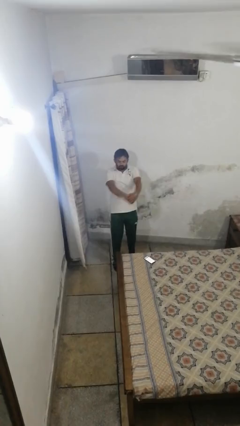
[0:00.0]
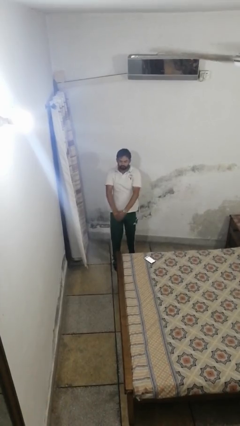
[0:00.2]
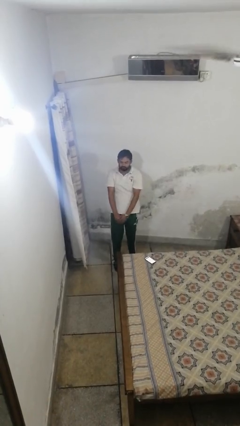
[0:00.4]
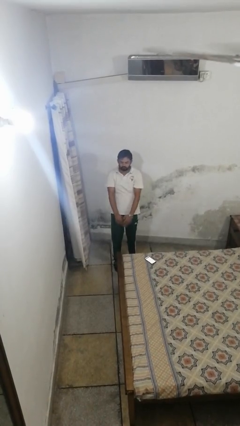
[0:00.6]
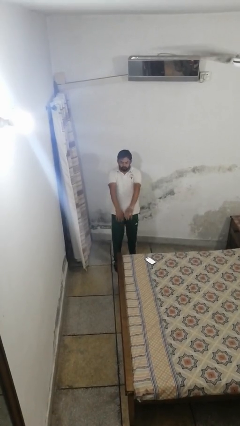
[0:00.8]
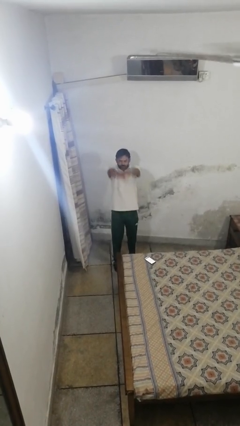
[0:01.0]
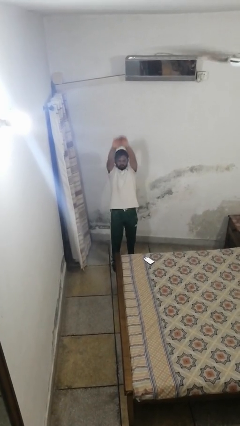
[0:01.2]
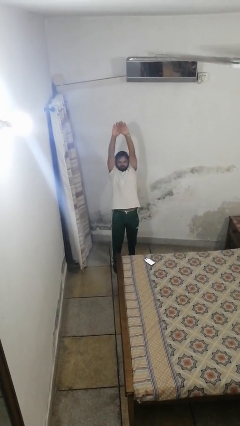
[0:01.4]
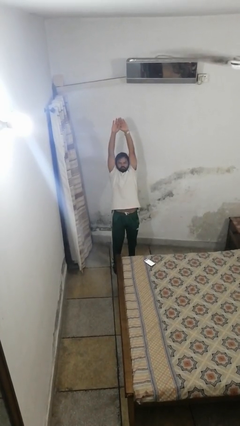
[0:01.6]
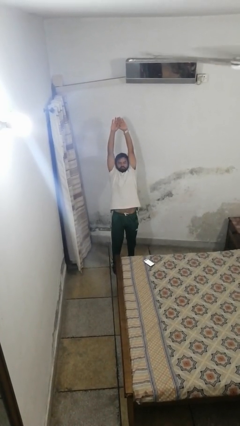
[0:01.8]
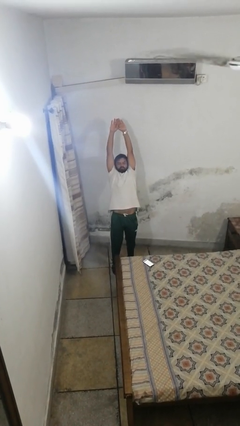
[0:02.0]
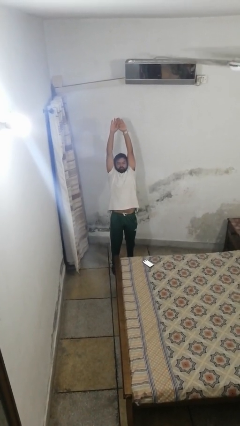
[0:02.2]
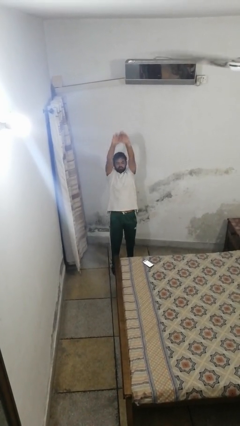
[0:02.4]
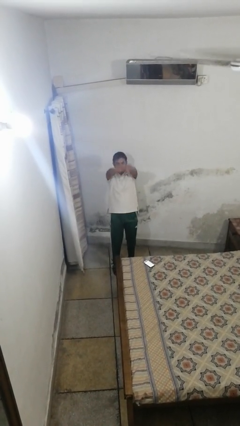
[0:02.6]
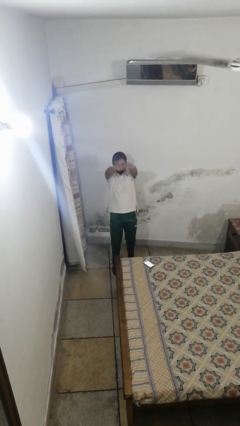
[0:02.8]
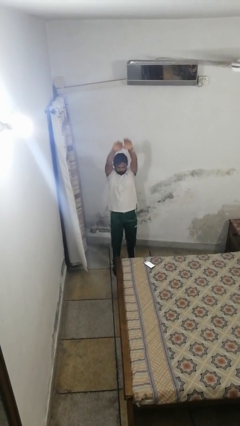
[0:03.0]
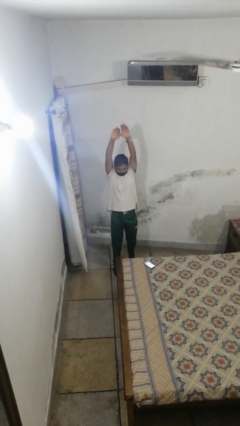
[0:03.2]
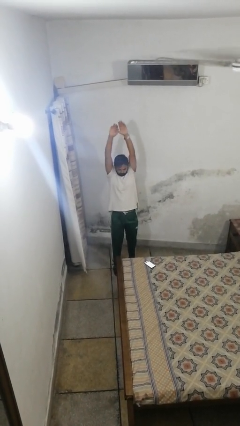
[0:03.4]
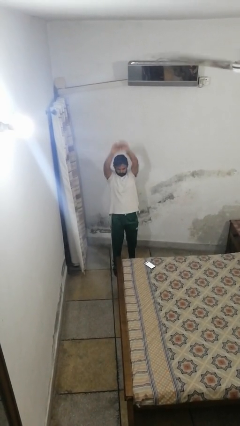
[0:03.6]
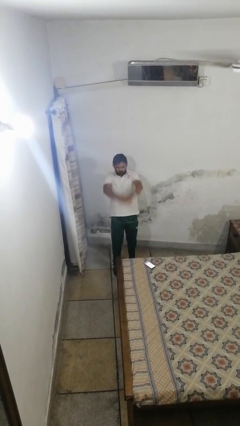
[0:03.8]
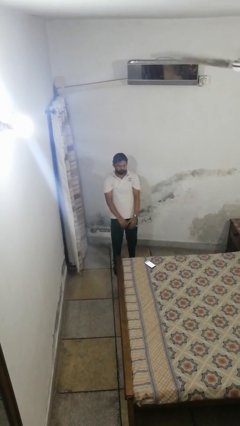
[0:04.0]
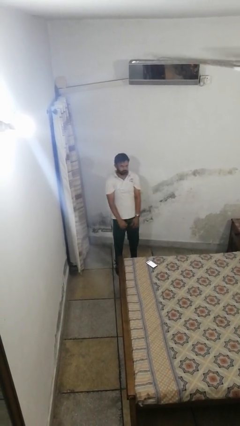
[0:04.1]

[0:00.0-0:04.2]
person stretches arms over head

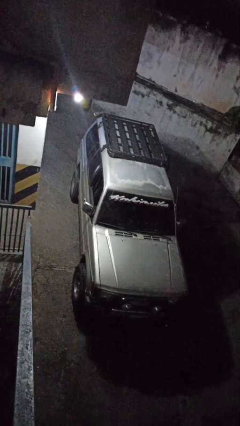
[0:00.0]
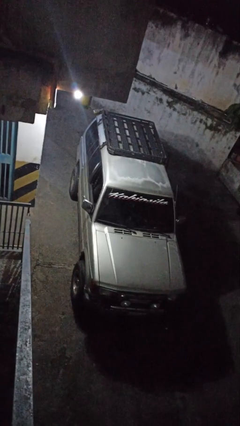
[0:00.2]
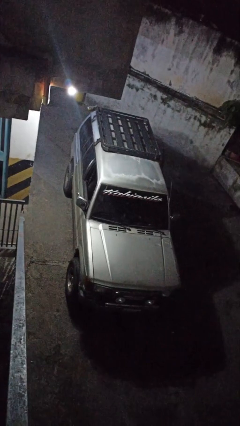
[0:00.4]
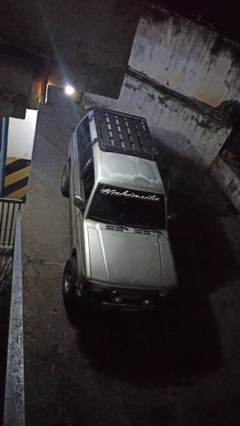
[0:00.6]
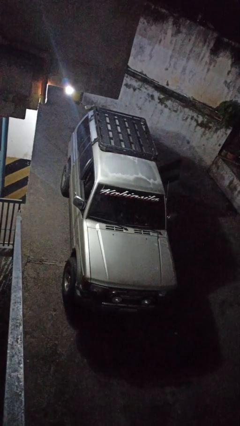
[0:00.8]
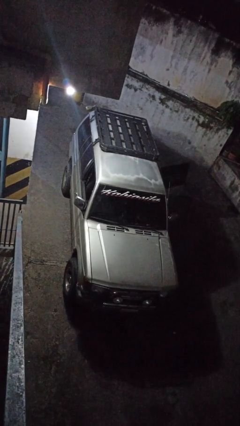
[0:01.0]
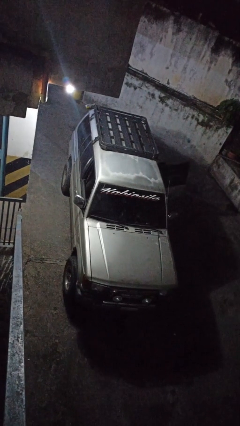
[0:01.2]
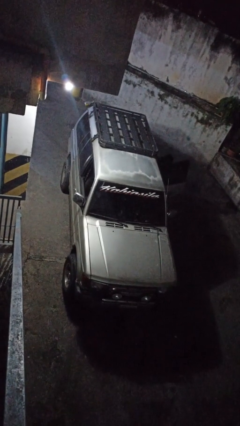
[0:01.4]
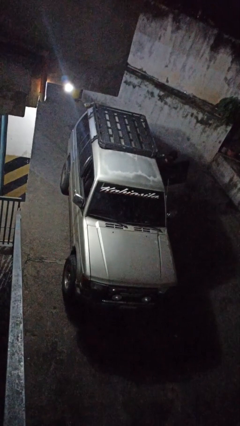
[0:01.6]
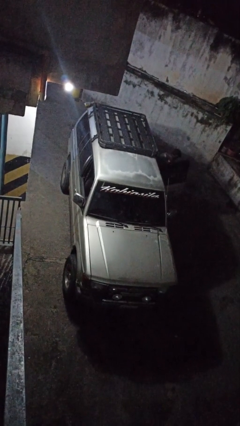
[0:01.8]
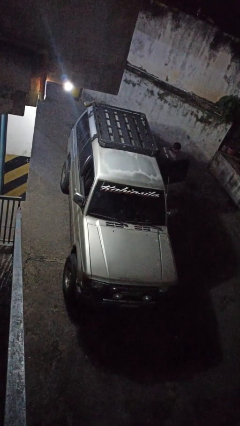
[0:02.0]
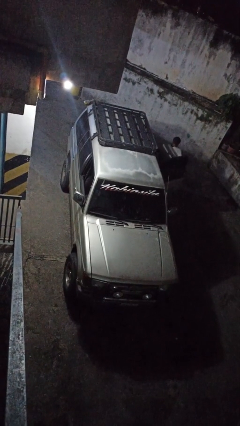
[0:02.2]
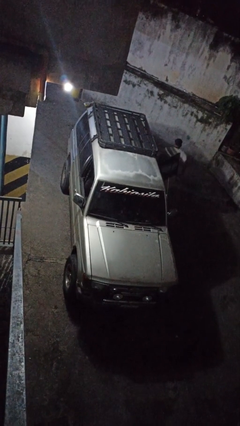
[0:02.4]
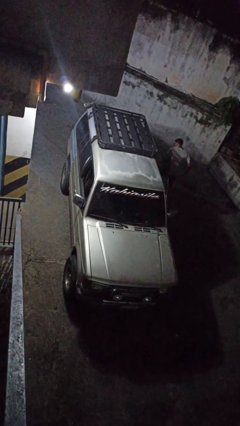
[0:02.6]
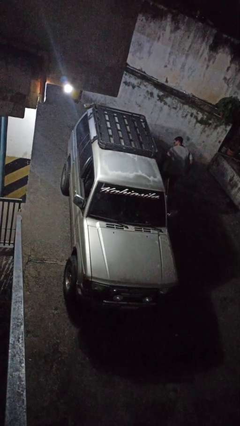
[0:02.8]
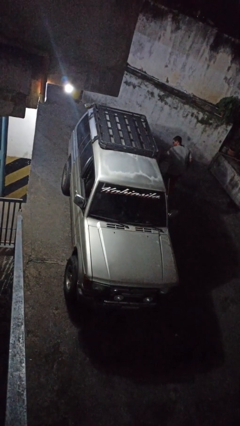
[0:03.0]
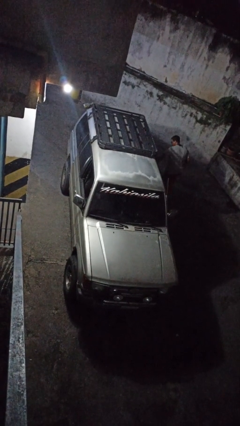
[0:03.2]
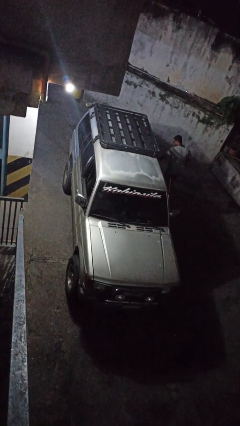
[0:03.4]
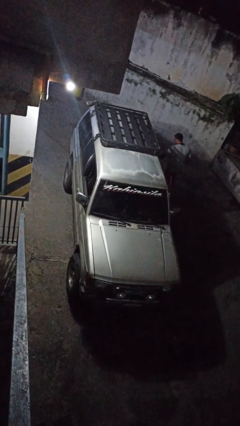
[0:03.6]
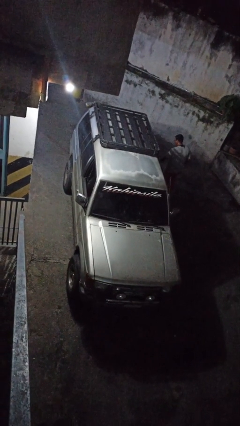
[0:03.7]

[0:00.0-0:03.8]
car drops off person

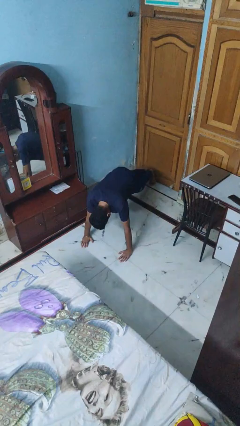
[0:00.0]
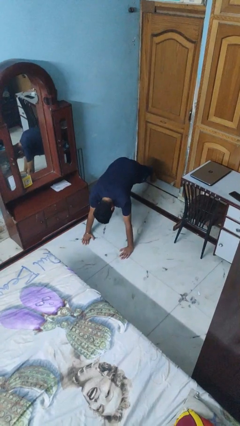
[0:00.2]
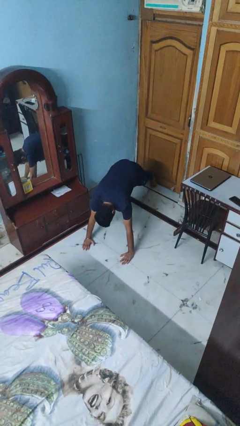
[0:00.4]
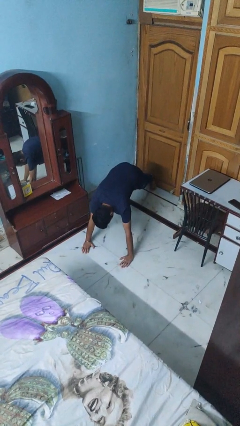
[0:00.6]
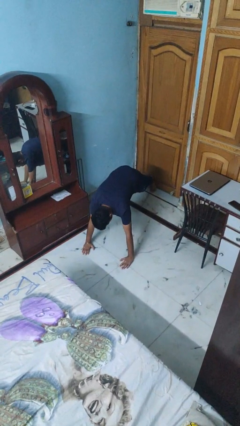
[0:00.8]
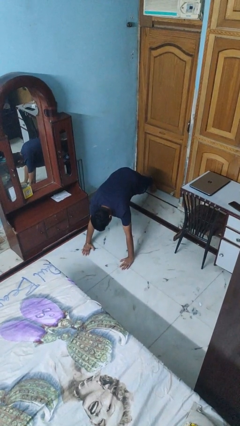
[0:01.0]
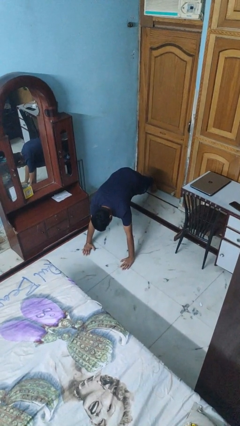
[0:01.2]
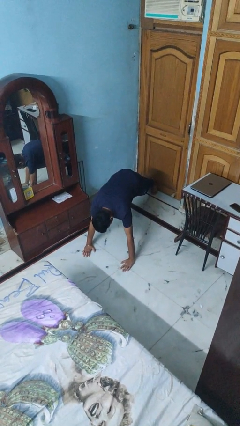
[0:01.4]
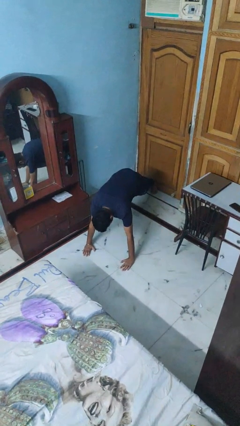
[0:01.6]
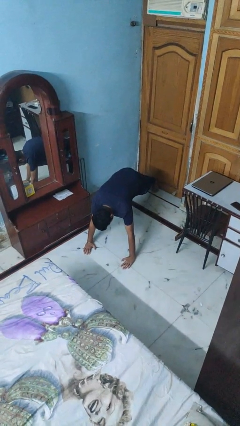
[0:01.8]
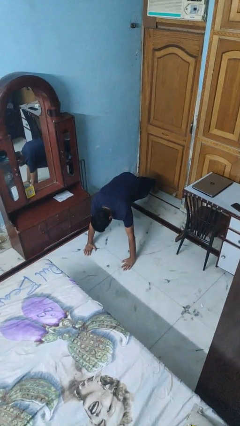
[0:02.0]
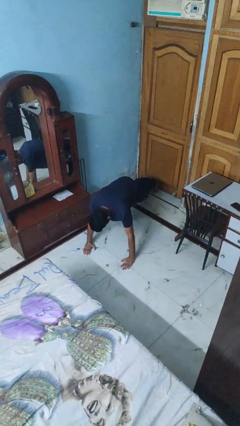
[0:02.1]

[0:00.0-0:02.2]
person exercises with pushup

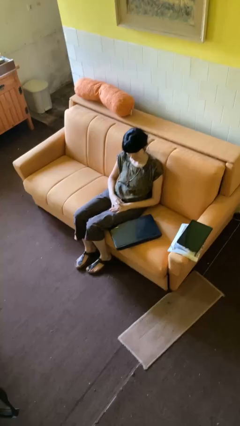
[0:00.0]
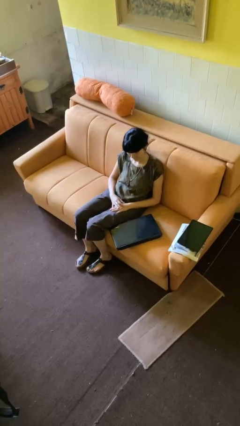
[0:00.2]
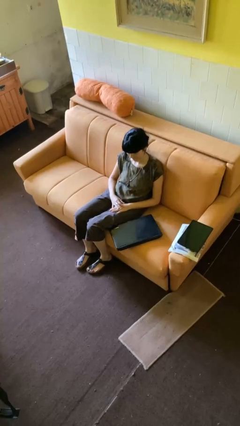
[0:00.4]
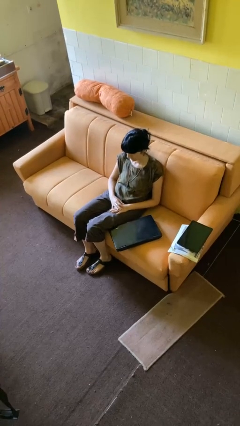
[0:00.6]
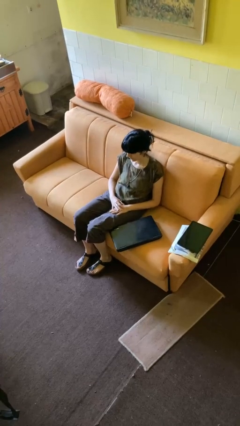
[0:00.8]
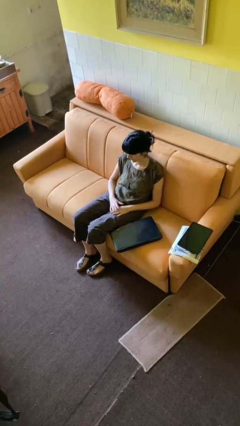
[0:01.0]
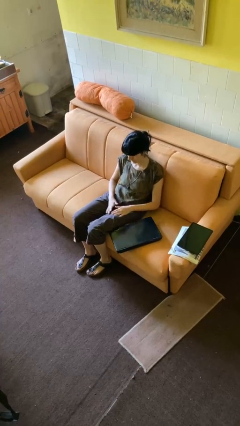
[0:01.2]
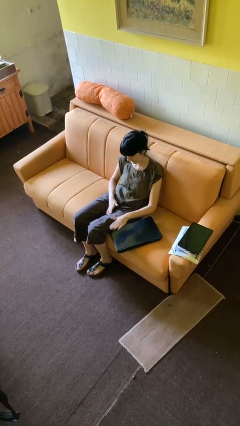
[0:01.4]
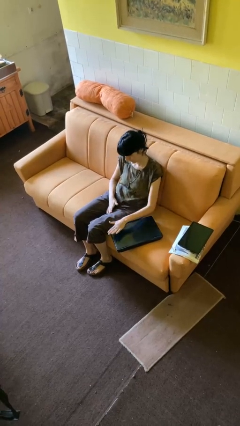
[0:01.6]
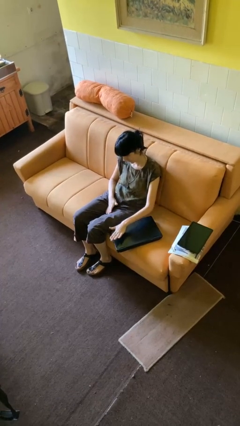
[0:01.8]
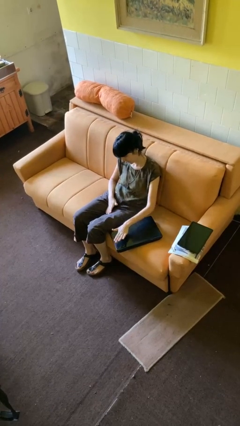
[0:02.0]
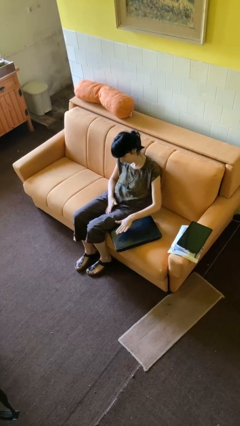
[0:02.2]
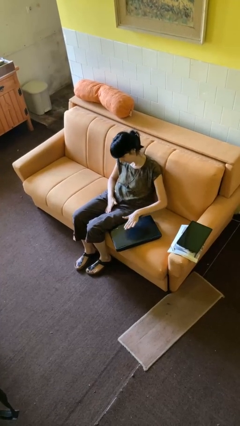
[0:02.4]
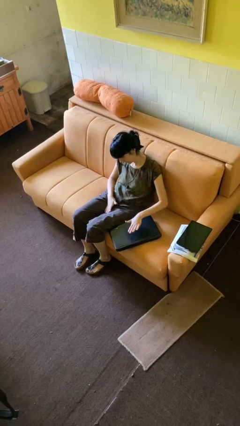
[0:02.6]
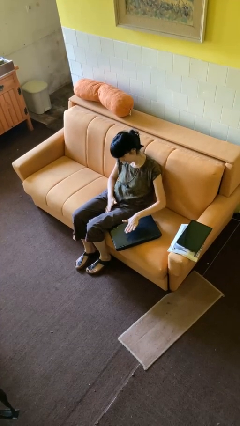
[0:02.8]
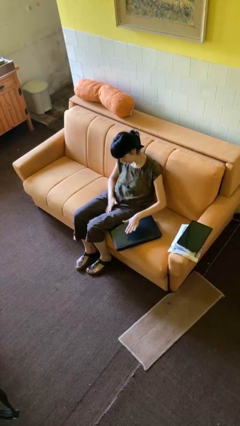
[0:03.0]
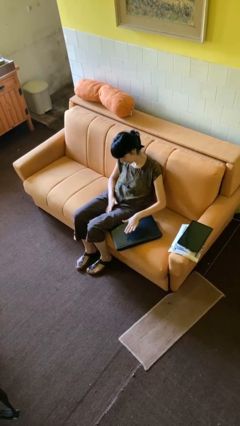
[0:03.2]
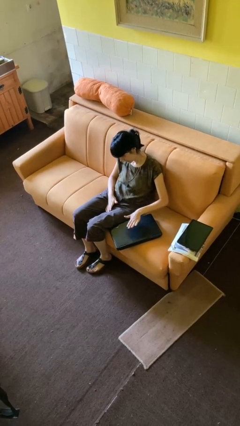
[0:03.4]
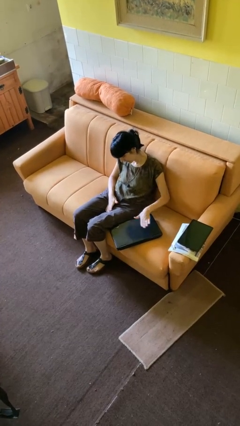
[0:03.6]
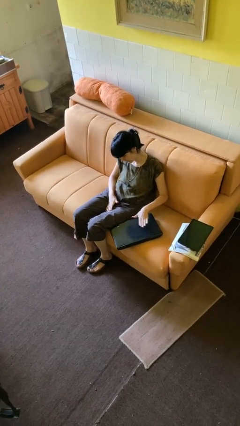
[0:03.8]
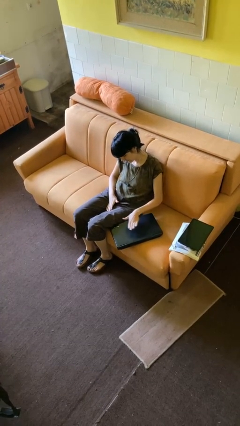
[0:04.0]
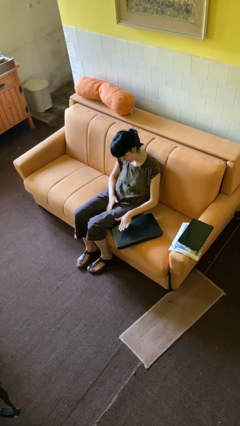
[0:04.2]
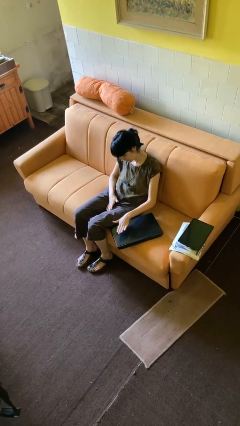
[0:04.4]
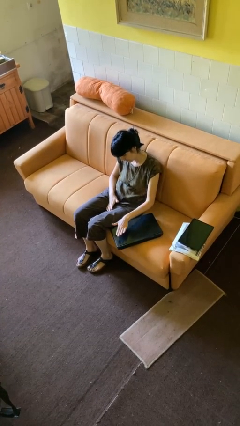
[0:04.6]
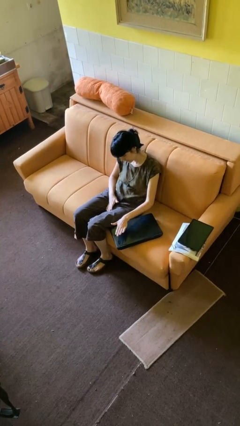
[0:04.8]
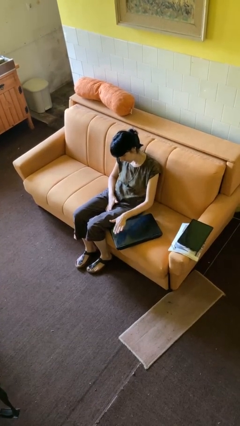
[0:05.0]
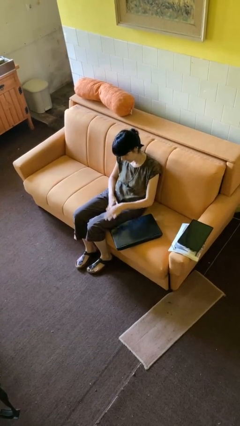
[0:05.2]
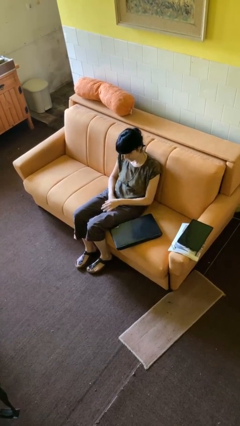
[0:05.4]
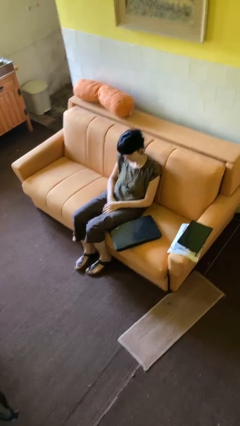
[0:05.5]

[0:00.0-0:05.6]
person waves hand over object

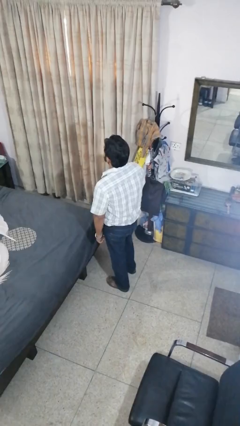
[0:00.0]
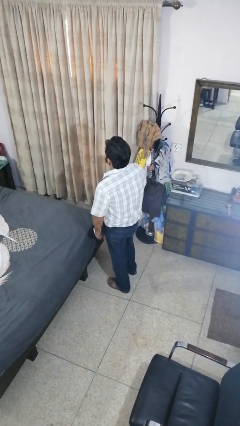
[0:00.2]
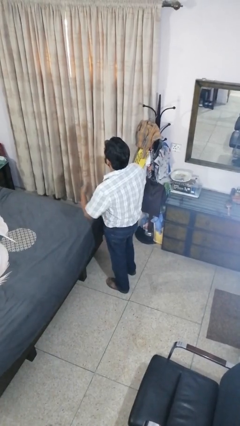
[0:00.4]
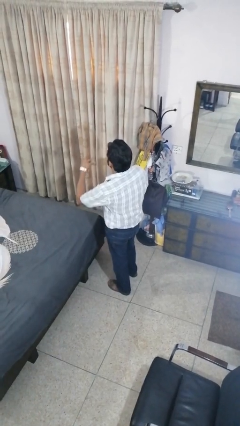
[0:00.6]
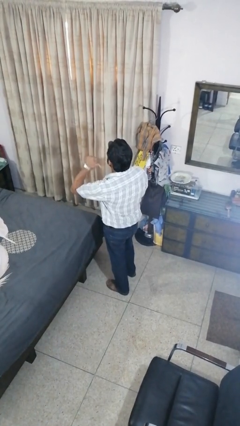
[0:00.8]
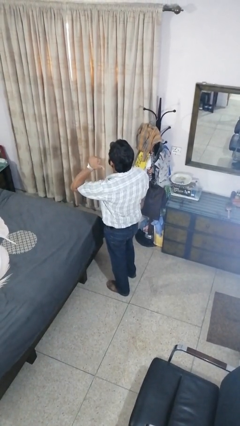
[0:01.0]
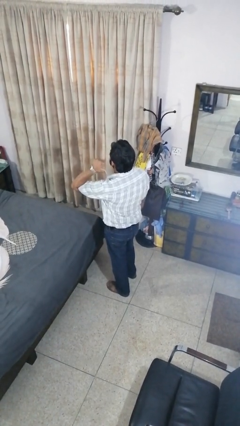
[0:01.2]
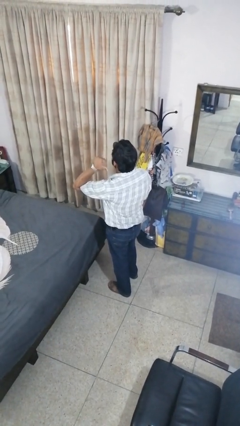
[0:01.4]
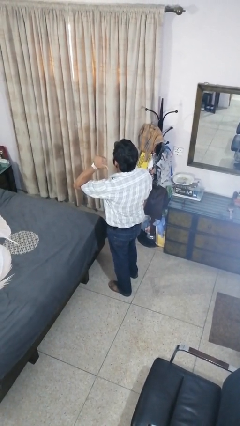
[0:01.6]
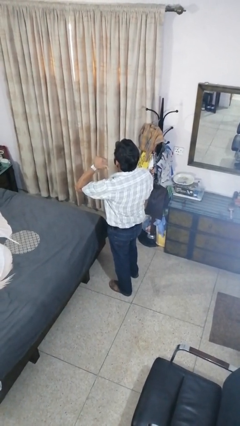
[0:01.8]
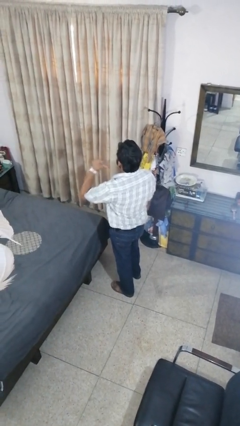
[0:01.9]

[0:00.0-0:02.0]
person gestures behind me
